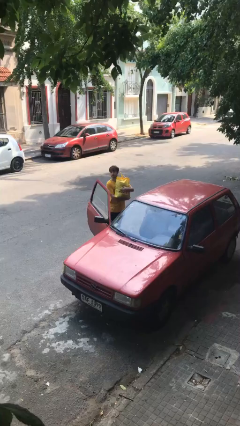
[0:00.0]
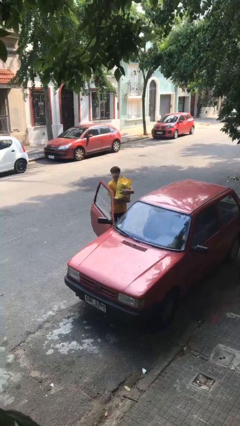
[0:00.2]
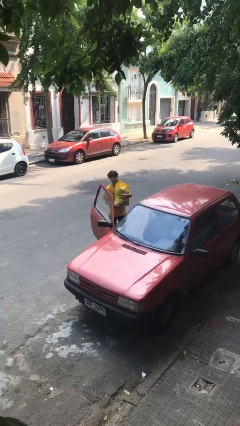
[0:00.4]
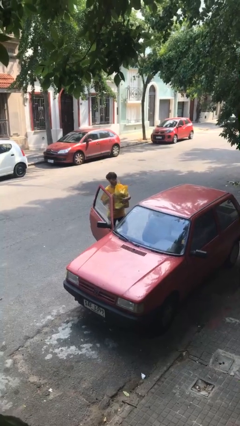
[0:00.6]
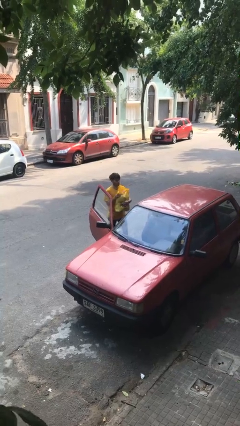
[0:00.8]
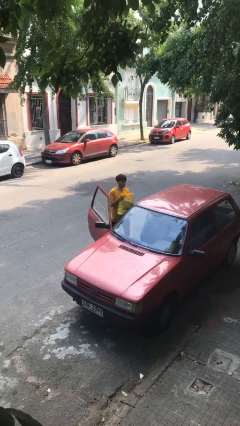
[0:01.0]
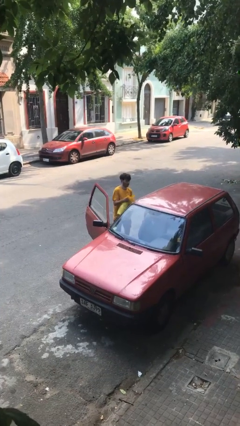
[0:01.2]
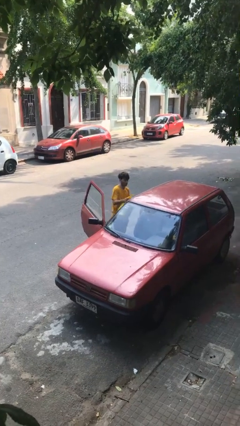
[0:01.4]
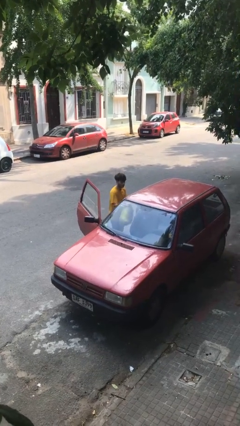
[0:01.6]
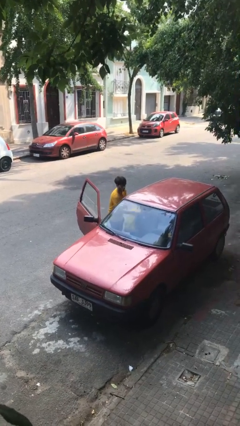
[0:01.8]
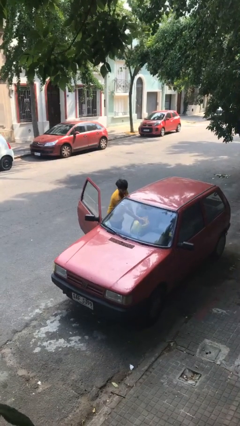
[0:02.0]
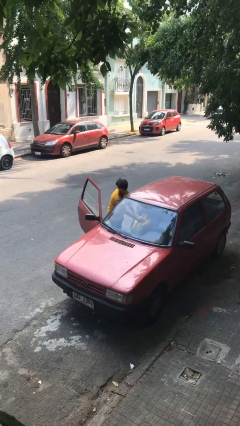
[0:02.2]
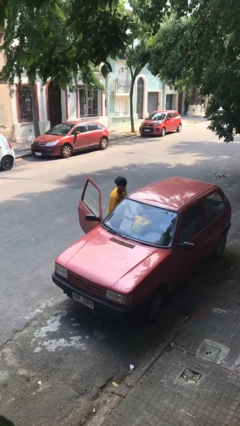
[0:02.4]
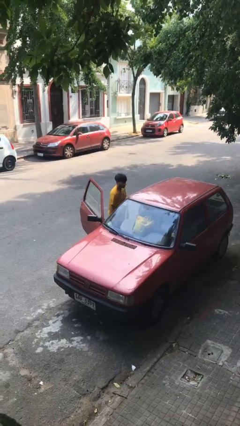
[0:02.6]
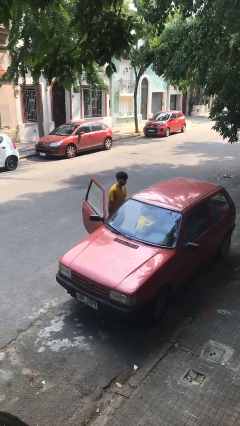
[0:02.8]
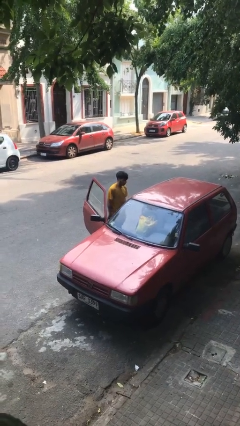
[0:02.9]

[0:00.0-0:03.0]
person loads car

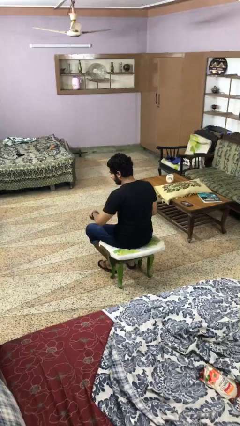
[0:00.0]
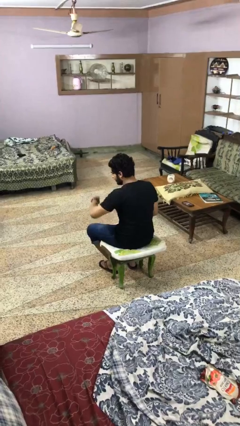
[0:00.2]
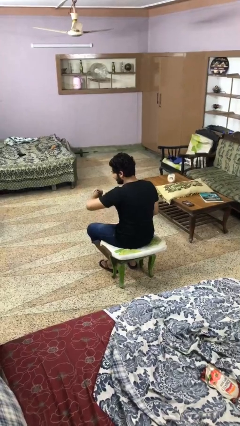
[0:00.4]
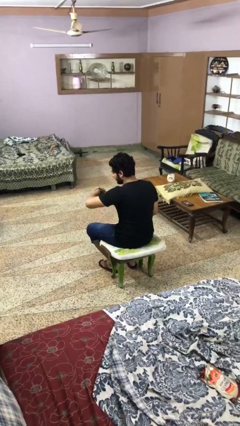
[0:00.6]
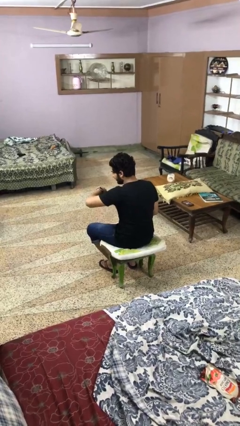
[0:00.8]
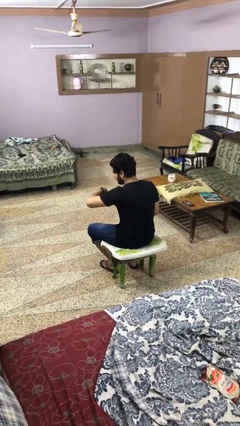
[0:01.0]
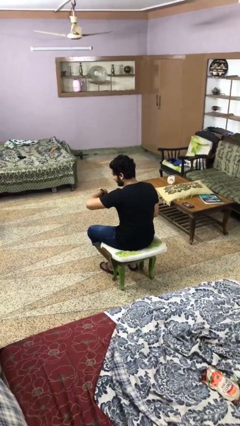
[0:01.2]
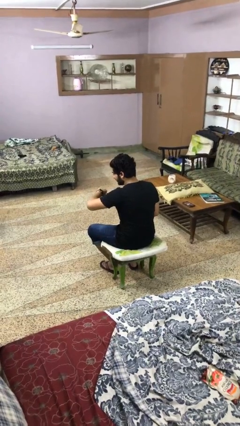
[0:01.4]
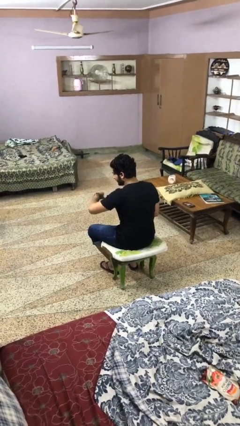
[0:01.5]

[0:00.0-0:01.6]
person looks at wristwatch

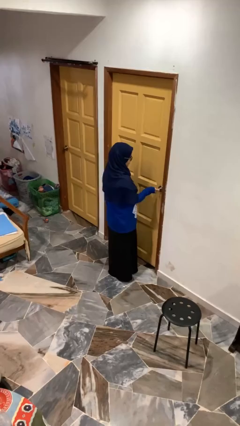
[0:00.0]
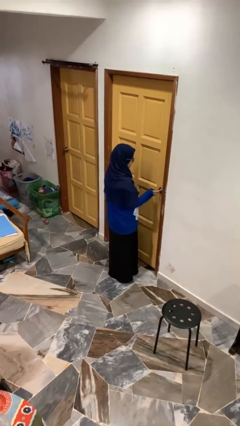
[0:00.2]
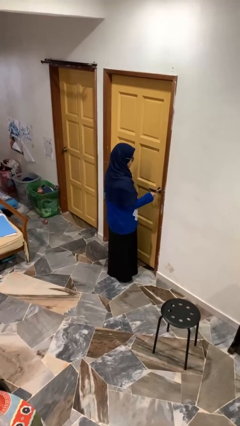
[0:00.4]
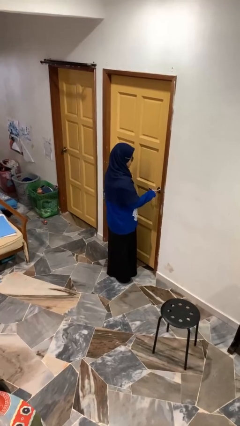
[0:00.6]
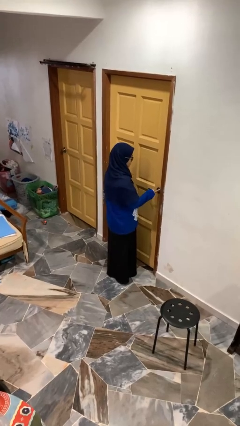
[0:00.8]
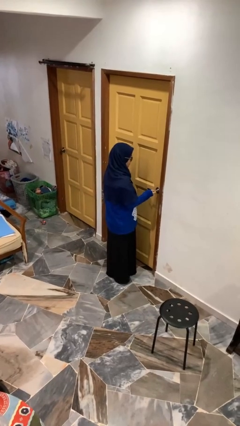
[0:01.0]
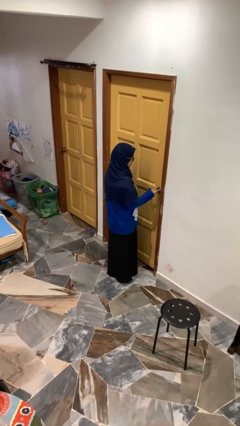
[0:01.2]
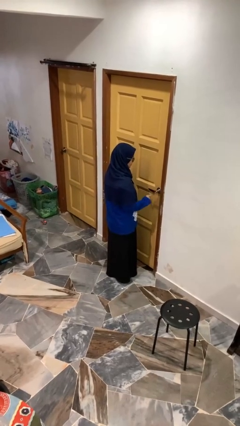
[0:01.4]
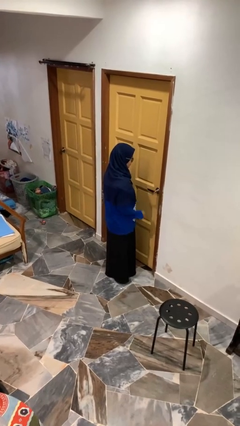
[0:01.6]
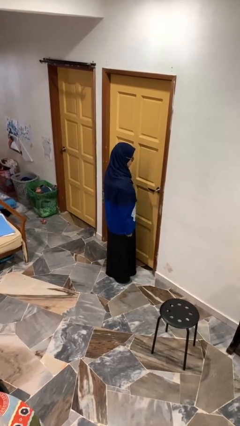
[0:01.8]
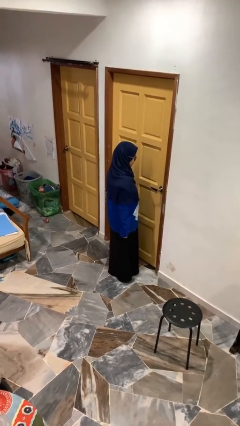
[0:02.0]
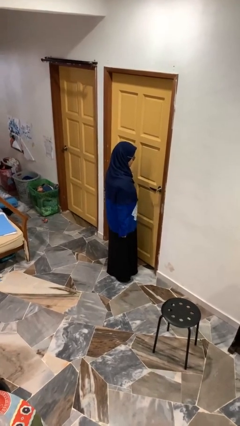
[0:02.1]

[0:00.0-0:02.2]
person locks door with keys

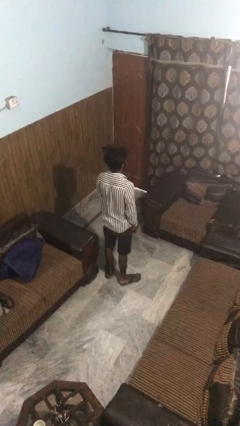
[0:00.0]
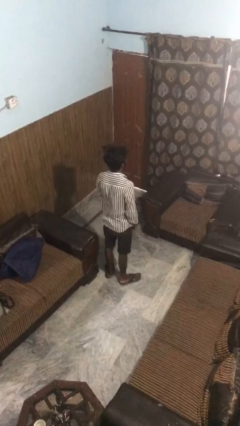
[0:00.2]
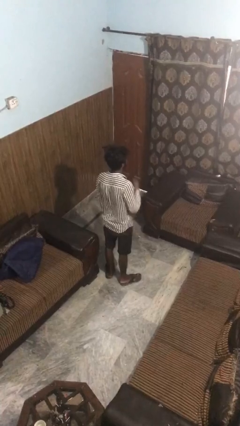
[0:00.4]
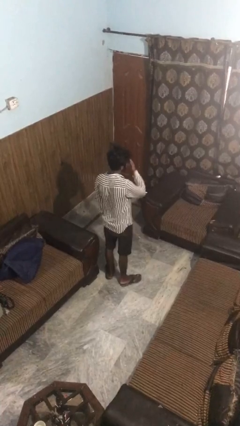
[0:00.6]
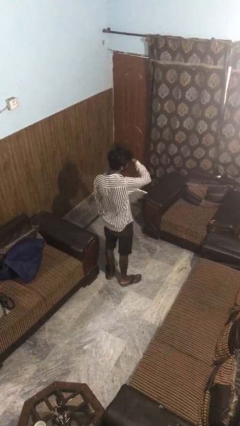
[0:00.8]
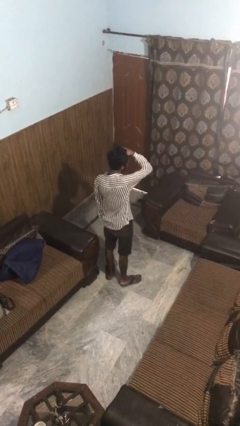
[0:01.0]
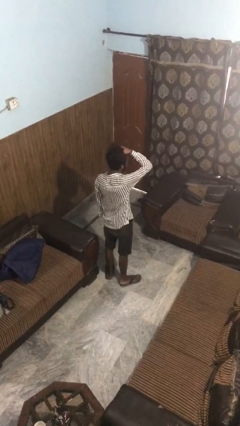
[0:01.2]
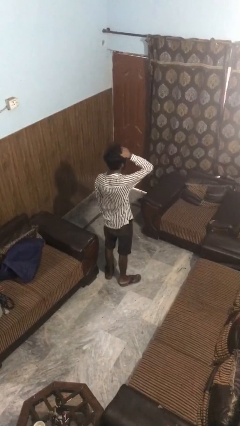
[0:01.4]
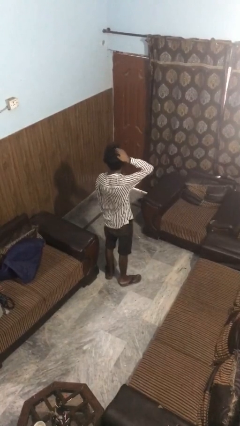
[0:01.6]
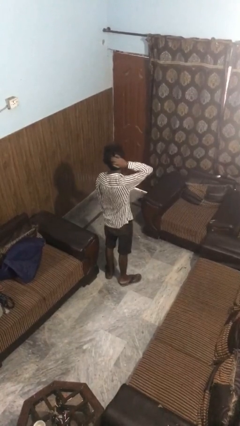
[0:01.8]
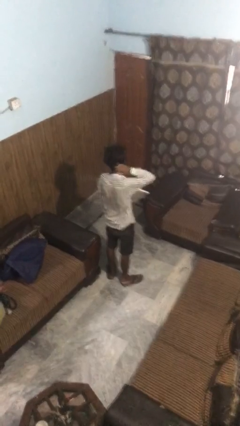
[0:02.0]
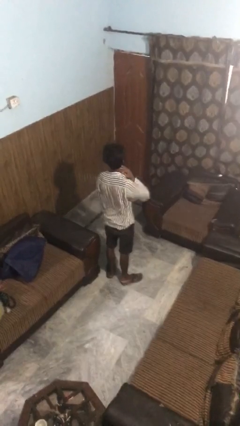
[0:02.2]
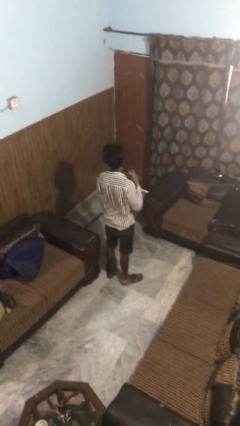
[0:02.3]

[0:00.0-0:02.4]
person strokes hair

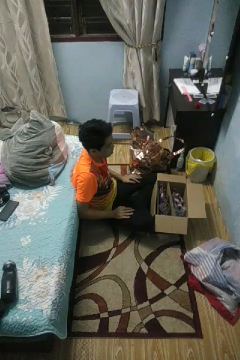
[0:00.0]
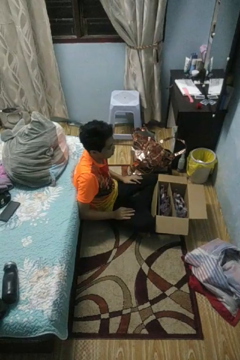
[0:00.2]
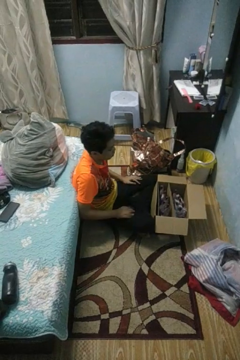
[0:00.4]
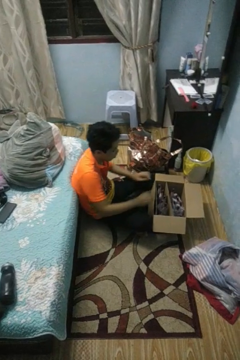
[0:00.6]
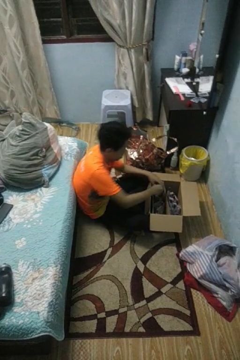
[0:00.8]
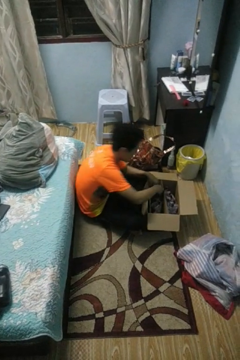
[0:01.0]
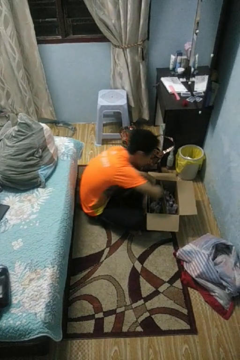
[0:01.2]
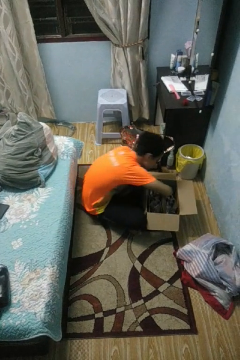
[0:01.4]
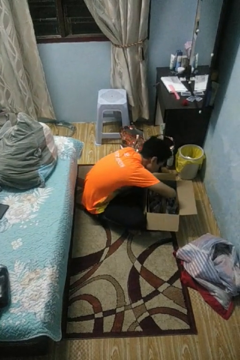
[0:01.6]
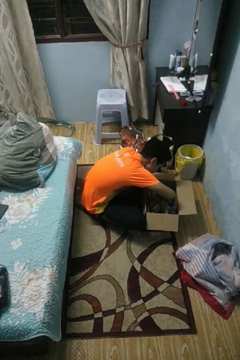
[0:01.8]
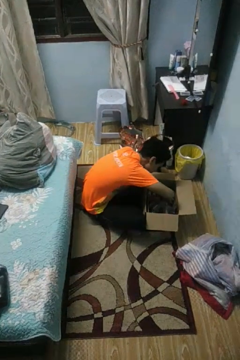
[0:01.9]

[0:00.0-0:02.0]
person searches in box

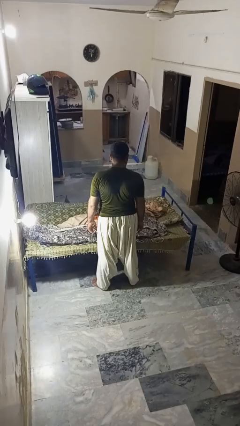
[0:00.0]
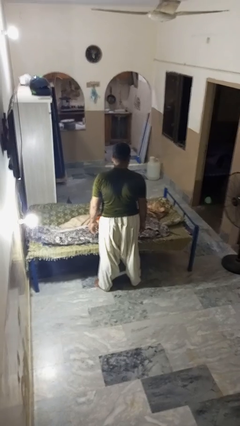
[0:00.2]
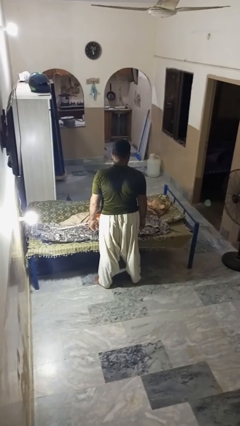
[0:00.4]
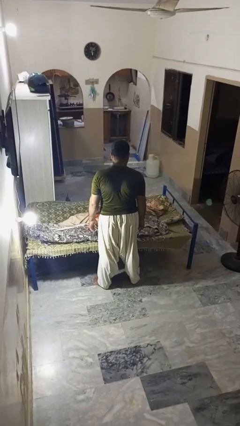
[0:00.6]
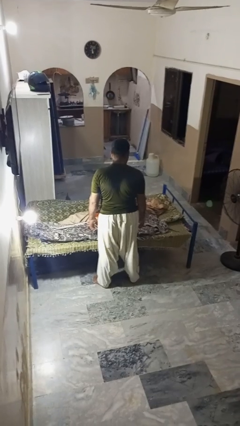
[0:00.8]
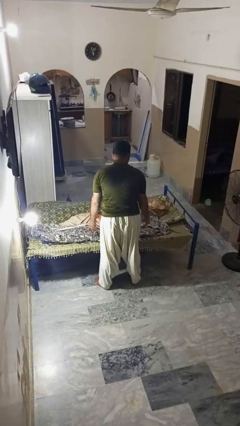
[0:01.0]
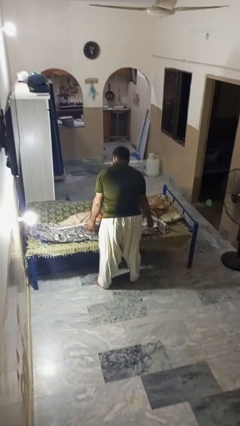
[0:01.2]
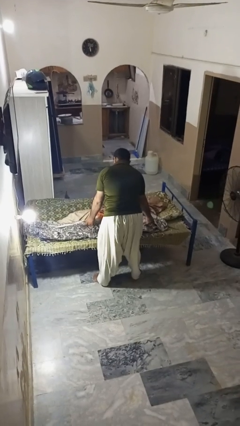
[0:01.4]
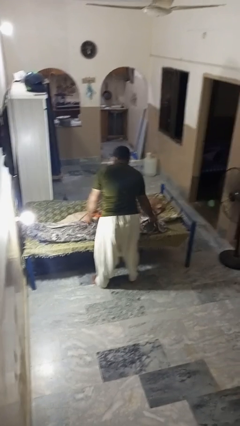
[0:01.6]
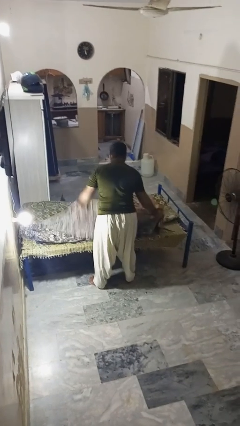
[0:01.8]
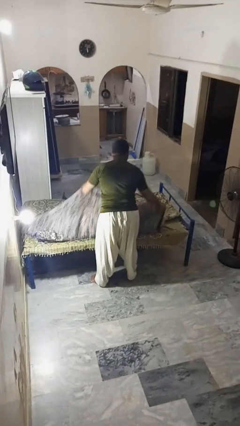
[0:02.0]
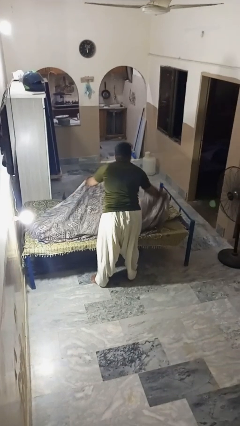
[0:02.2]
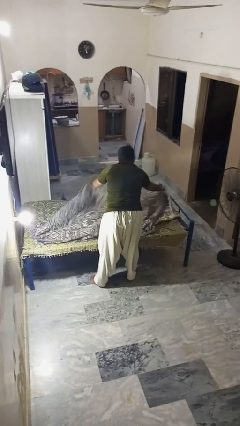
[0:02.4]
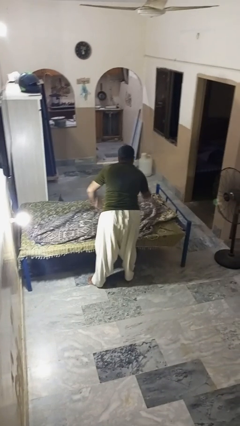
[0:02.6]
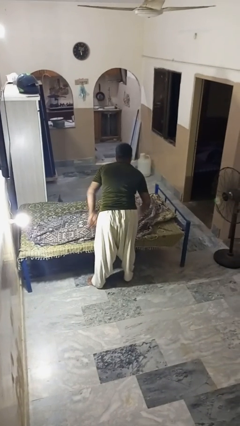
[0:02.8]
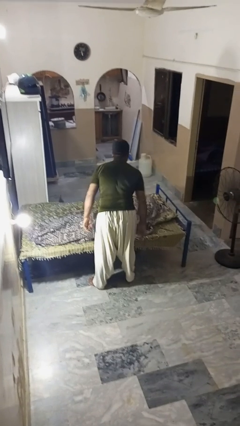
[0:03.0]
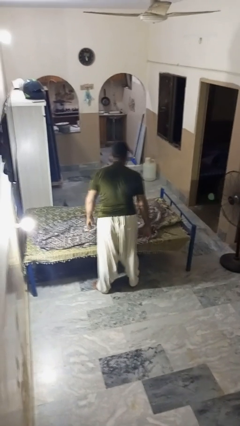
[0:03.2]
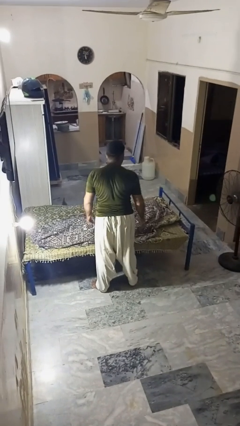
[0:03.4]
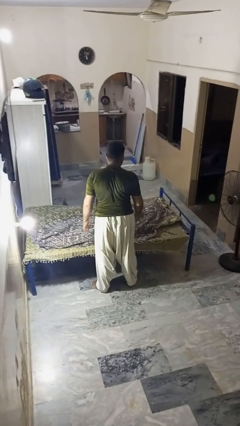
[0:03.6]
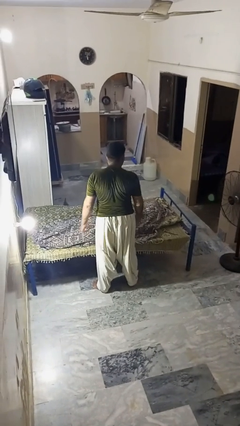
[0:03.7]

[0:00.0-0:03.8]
person covers friend with blanket

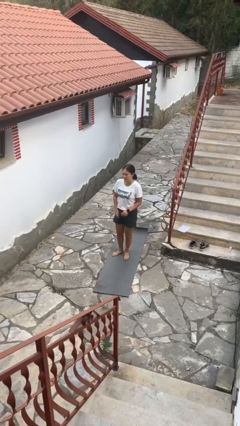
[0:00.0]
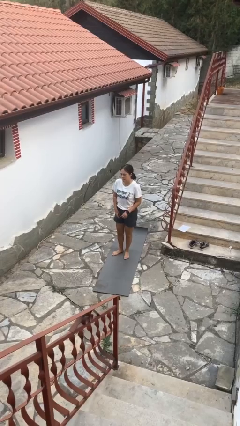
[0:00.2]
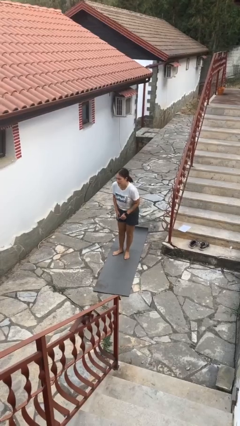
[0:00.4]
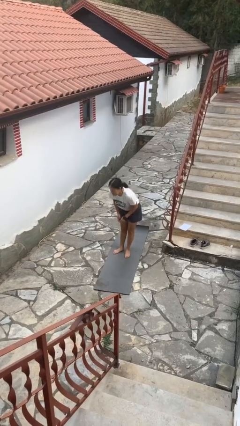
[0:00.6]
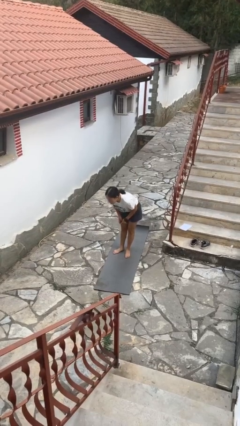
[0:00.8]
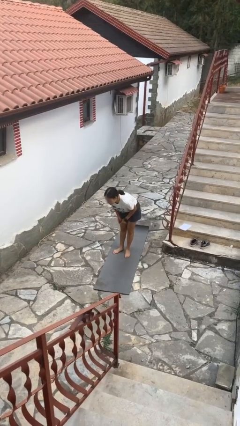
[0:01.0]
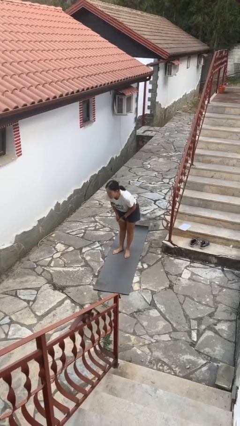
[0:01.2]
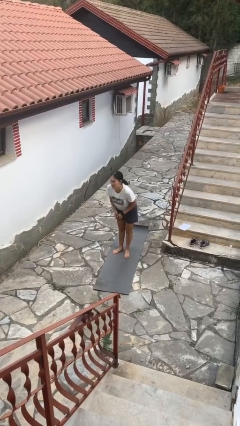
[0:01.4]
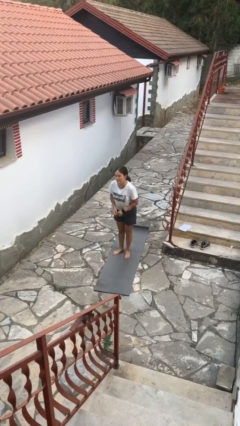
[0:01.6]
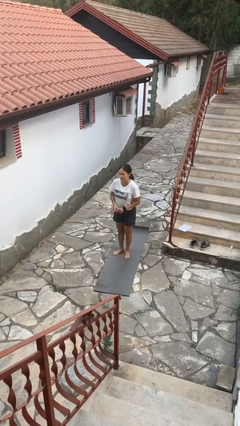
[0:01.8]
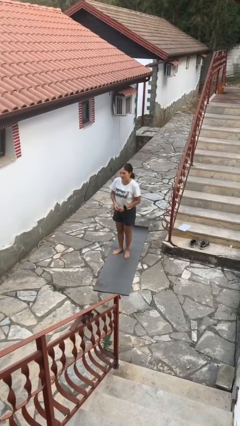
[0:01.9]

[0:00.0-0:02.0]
person bows

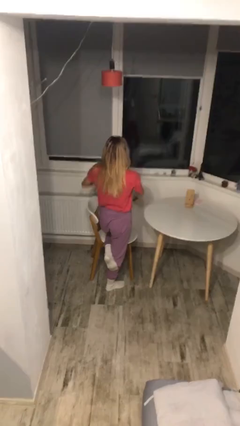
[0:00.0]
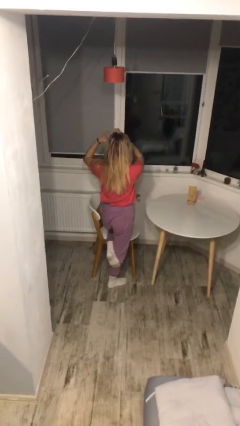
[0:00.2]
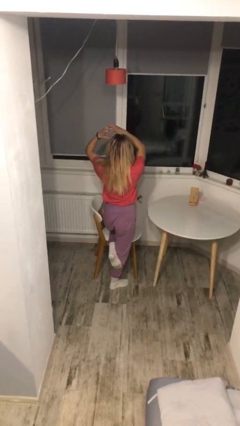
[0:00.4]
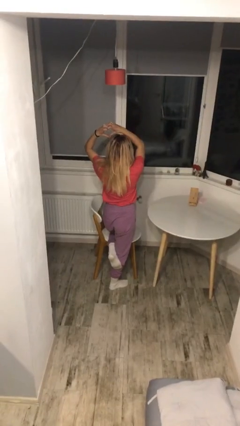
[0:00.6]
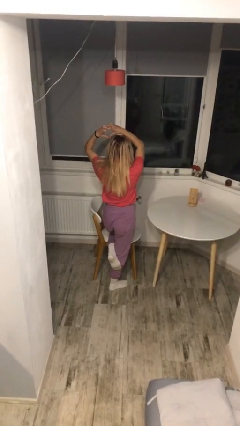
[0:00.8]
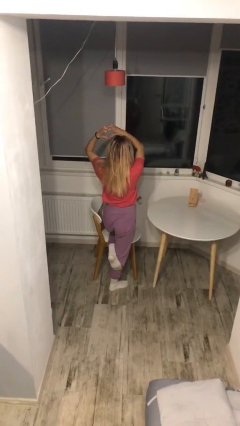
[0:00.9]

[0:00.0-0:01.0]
person gestures heart
